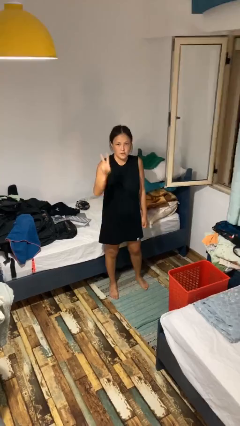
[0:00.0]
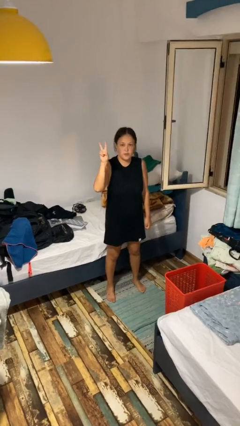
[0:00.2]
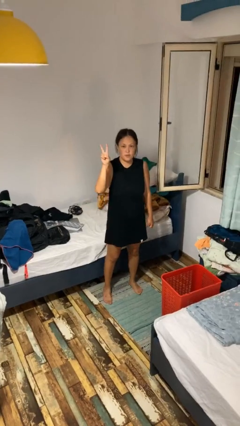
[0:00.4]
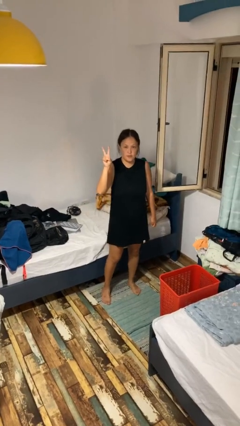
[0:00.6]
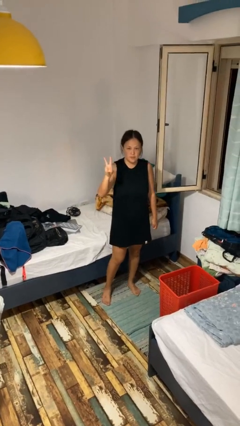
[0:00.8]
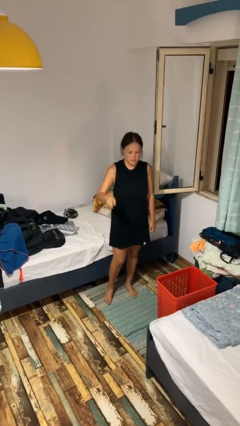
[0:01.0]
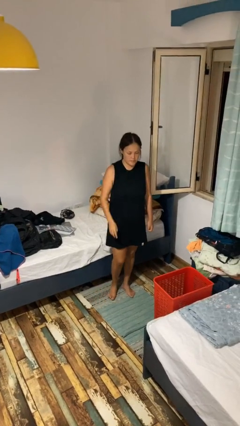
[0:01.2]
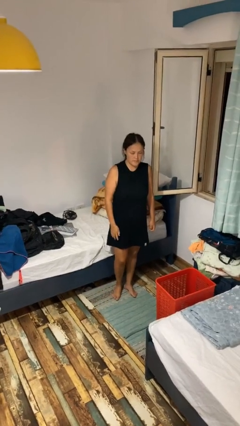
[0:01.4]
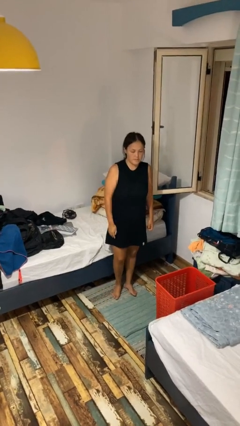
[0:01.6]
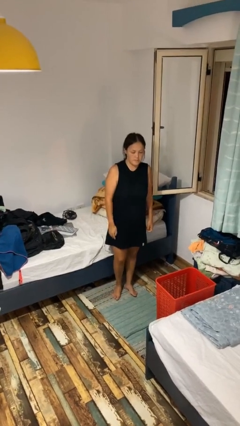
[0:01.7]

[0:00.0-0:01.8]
person gestures peace

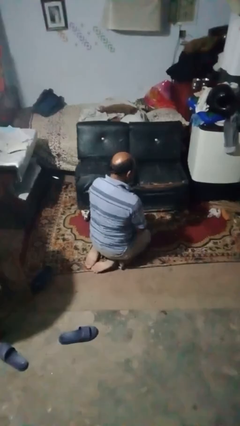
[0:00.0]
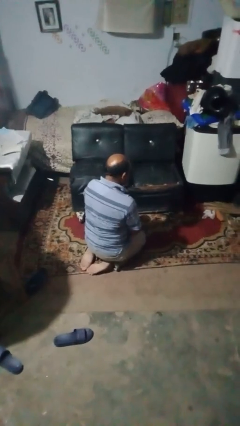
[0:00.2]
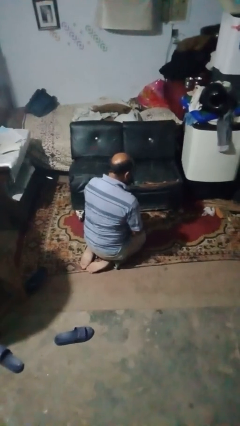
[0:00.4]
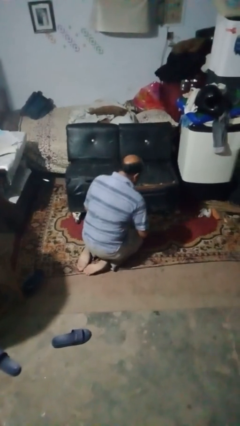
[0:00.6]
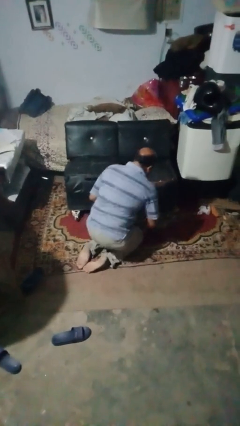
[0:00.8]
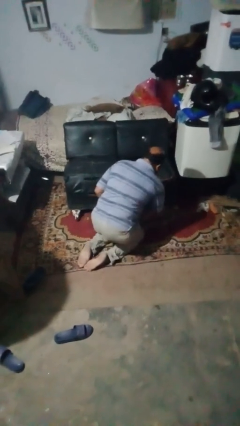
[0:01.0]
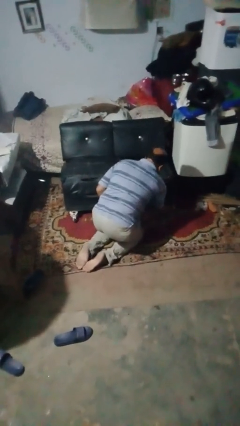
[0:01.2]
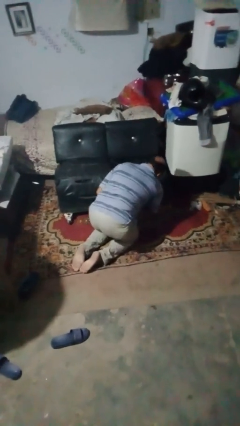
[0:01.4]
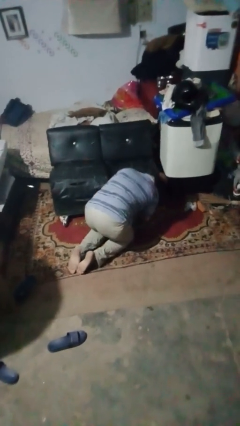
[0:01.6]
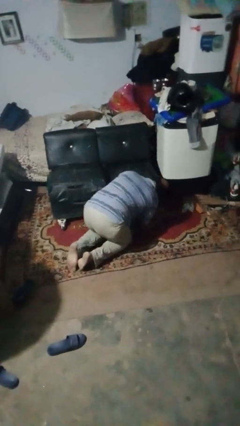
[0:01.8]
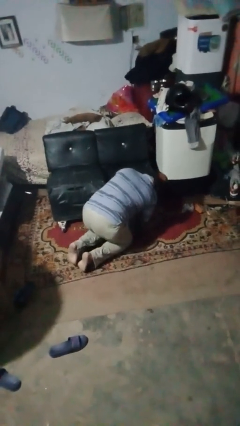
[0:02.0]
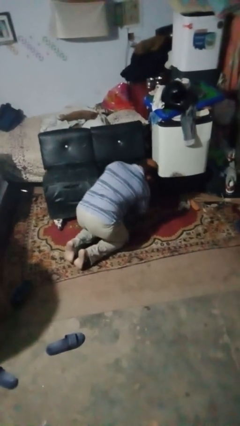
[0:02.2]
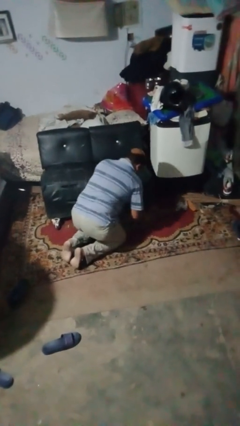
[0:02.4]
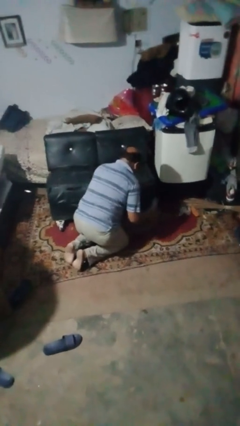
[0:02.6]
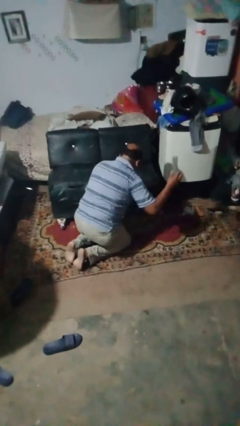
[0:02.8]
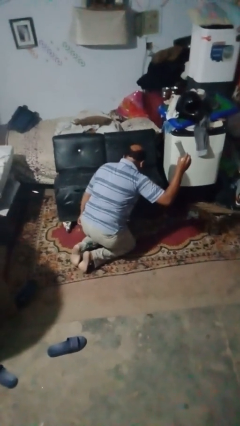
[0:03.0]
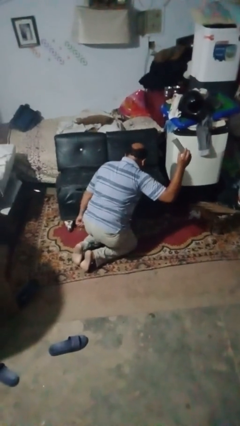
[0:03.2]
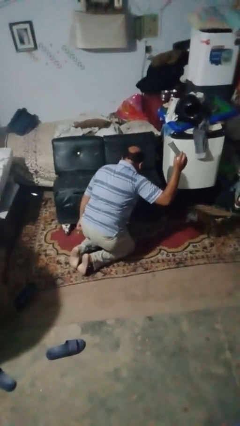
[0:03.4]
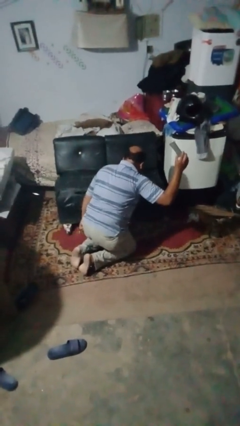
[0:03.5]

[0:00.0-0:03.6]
person searches under couch

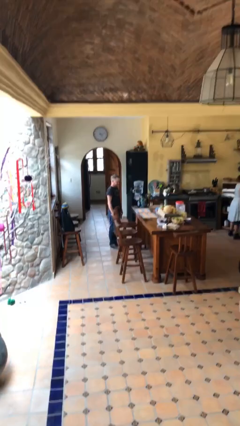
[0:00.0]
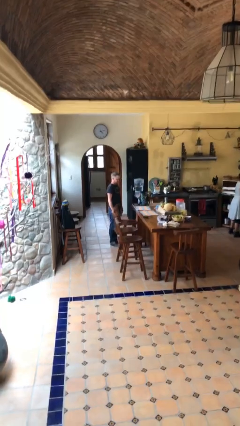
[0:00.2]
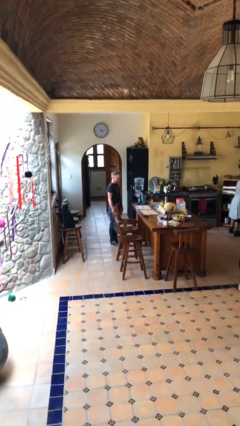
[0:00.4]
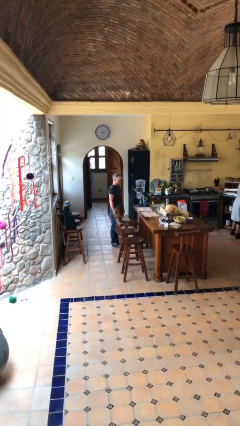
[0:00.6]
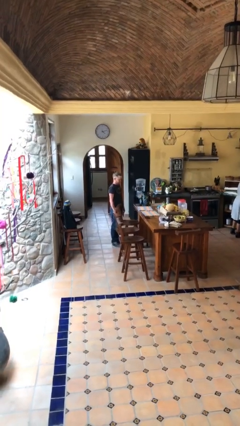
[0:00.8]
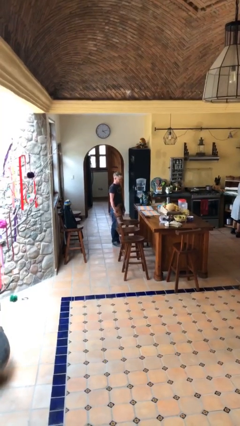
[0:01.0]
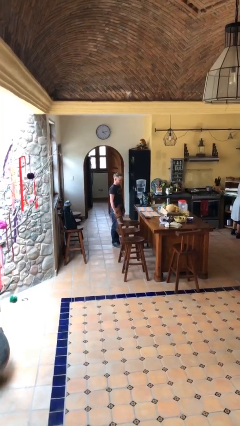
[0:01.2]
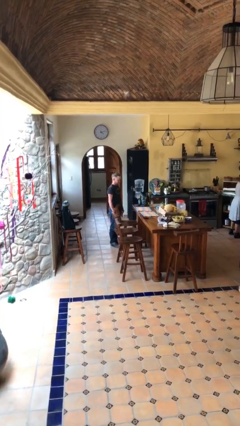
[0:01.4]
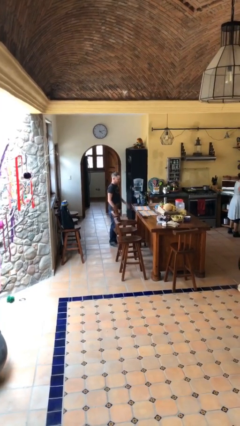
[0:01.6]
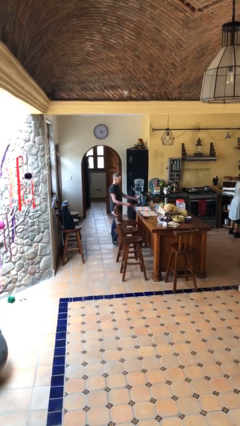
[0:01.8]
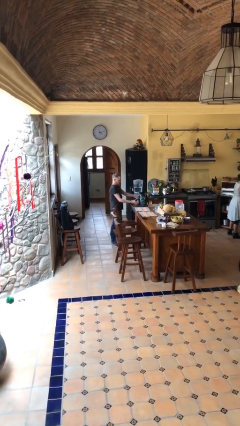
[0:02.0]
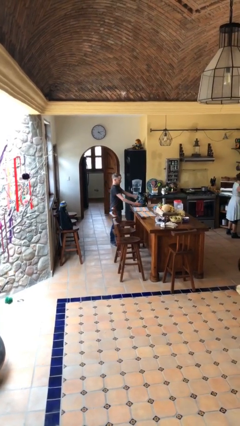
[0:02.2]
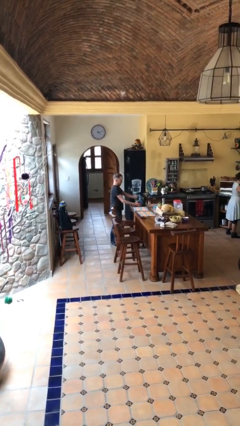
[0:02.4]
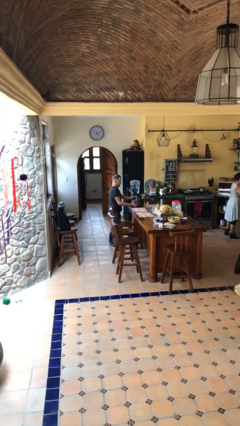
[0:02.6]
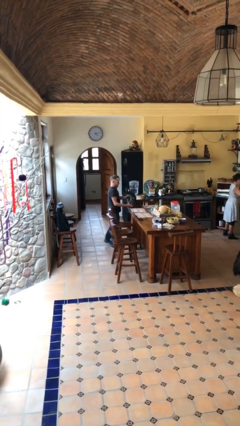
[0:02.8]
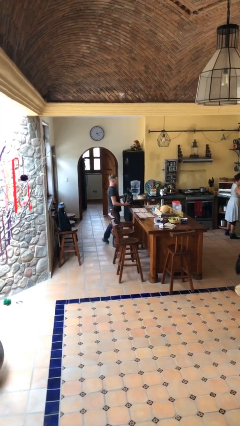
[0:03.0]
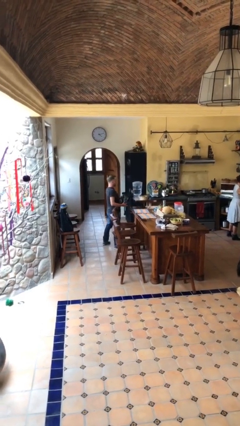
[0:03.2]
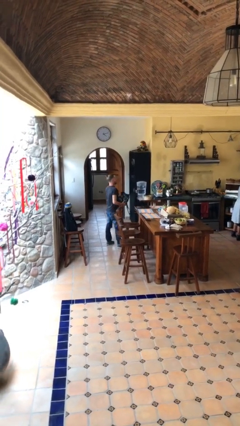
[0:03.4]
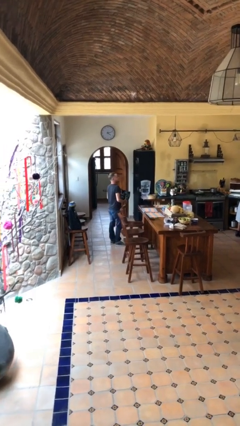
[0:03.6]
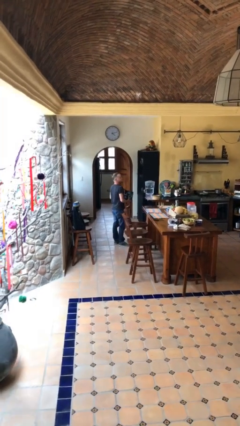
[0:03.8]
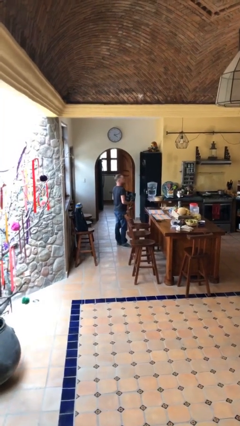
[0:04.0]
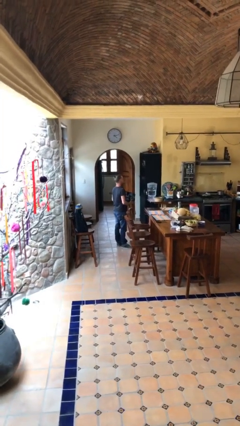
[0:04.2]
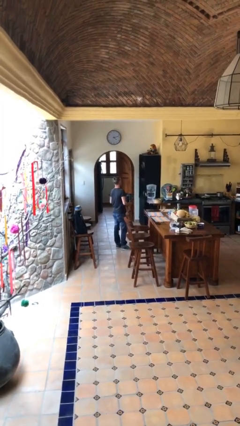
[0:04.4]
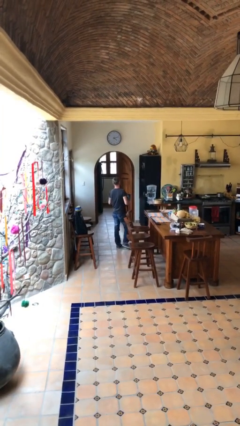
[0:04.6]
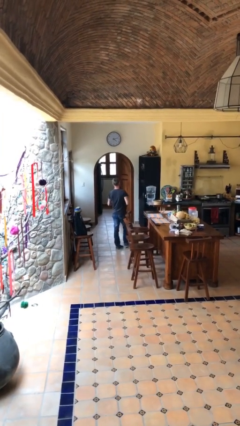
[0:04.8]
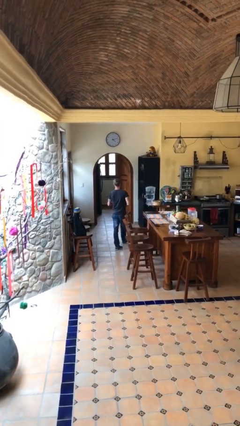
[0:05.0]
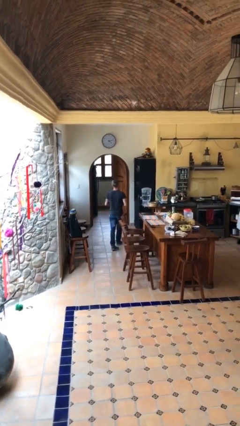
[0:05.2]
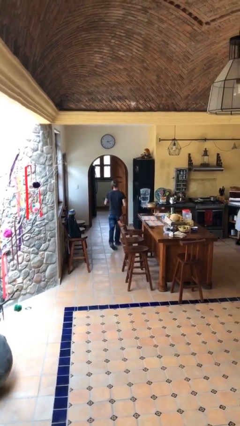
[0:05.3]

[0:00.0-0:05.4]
person picks up object from table

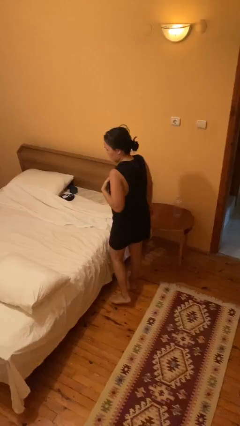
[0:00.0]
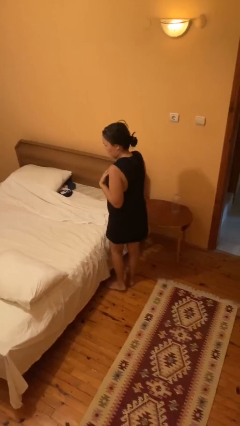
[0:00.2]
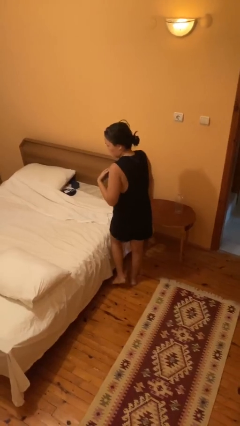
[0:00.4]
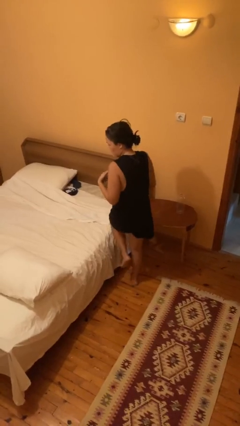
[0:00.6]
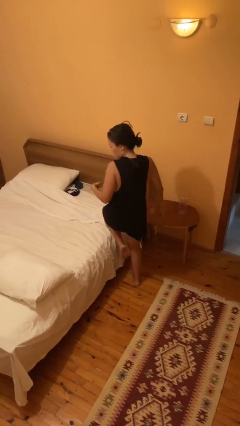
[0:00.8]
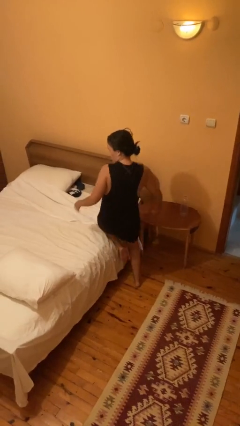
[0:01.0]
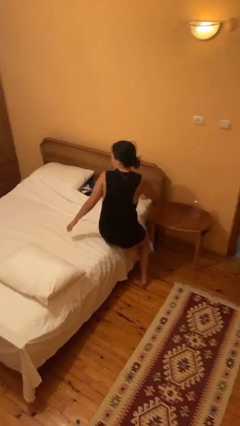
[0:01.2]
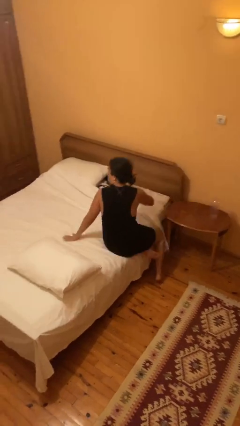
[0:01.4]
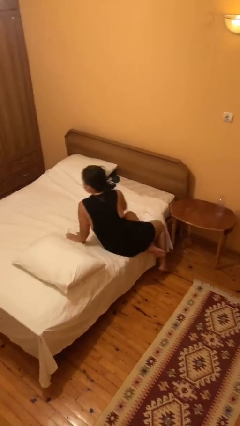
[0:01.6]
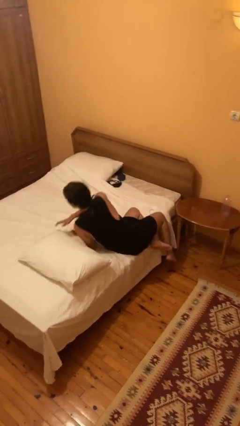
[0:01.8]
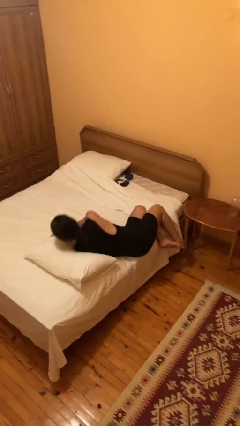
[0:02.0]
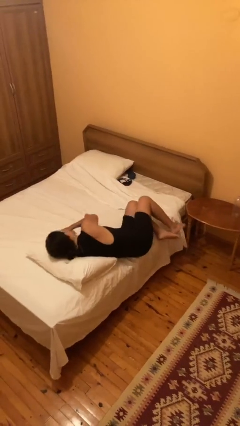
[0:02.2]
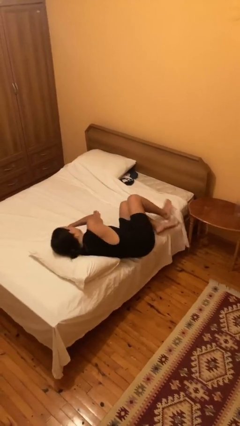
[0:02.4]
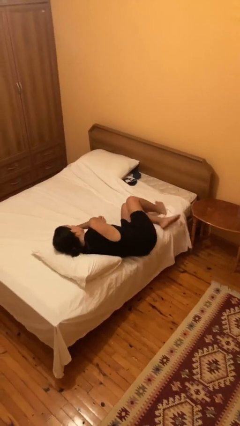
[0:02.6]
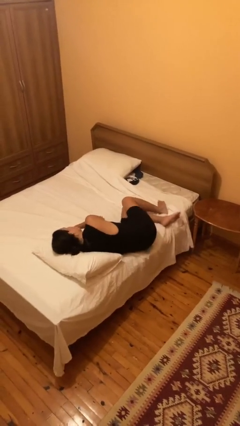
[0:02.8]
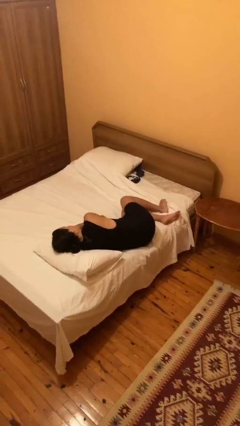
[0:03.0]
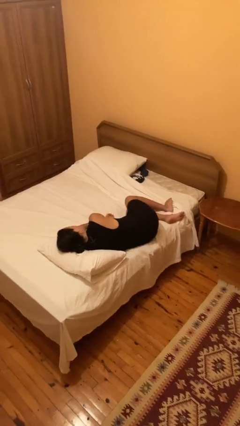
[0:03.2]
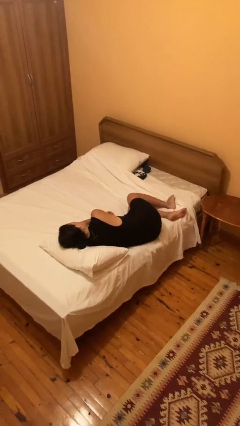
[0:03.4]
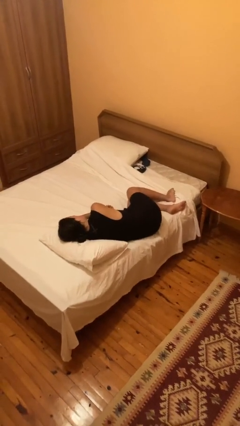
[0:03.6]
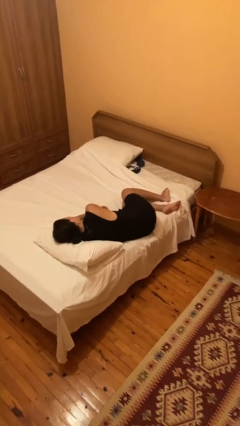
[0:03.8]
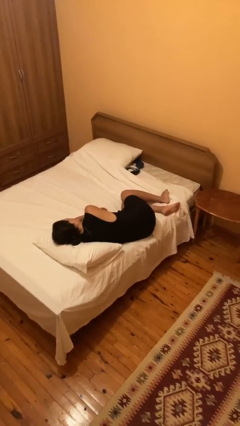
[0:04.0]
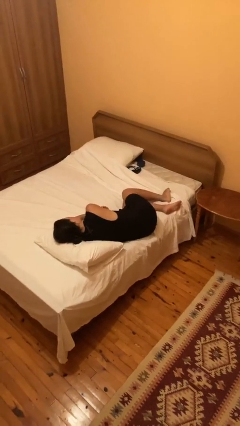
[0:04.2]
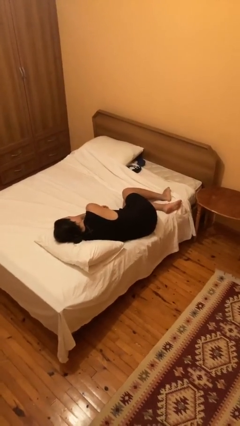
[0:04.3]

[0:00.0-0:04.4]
person lies down on bed

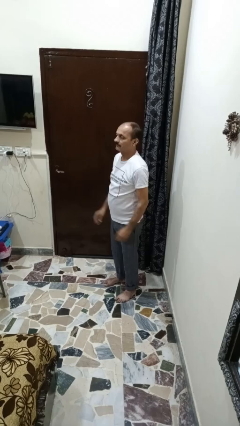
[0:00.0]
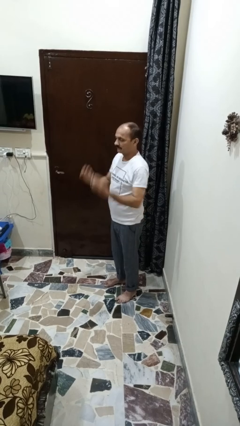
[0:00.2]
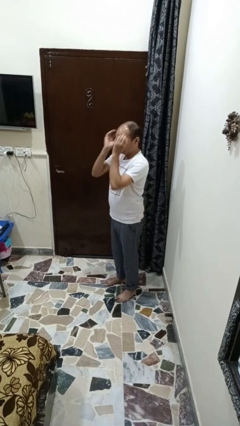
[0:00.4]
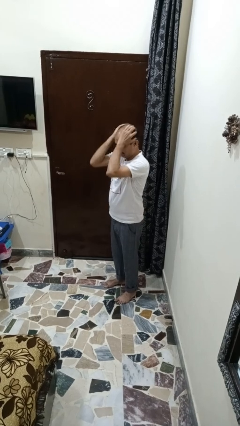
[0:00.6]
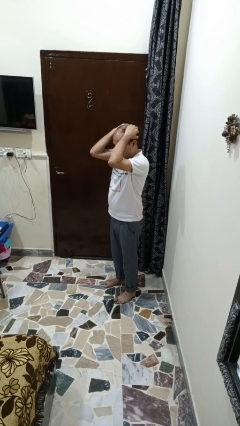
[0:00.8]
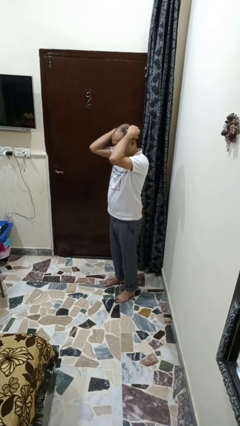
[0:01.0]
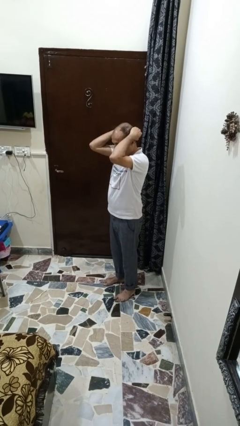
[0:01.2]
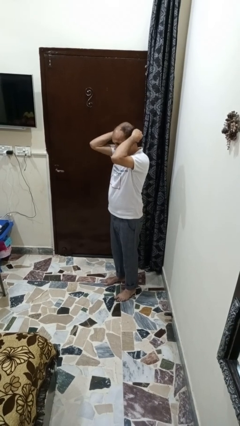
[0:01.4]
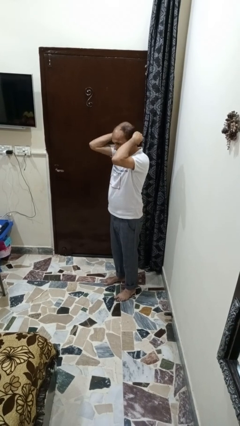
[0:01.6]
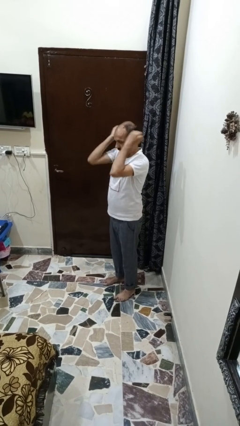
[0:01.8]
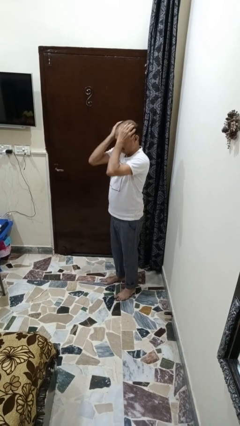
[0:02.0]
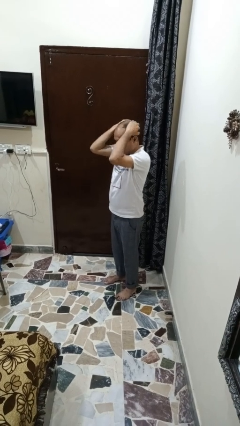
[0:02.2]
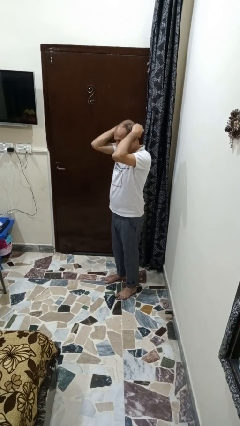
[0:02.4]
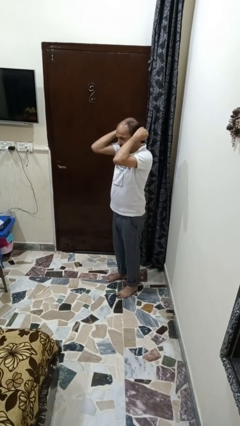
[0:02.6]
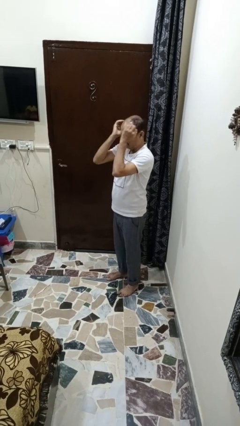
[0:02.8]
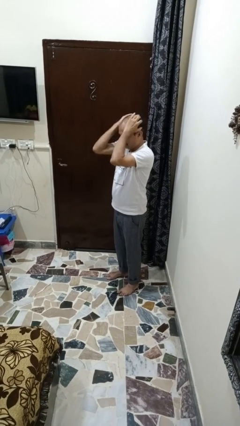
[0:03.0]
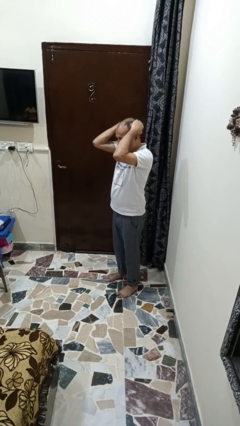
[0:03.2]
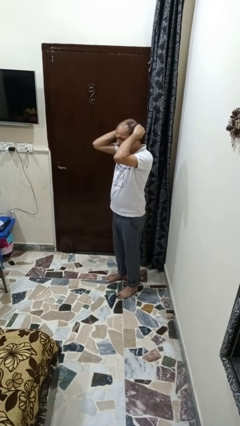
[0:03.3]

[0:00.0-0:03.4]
person strokes hair
